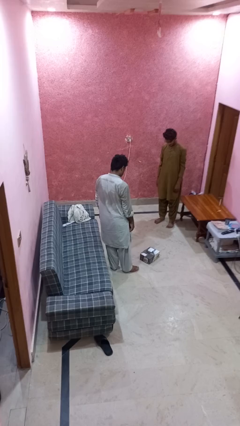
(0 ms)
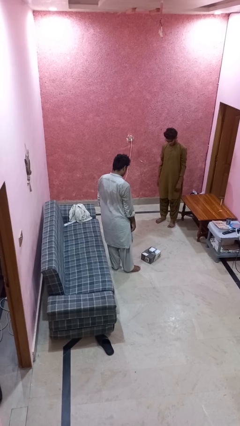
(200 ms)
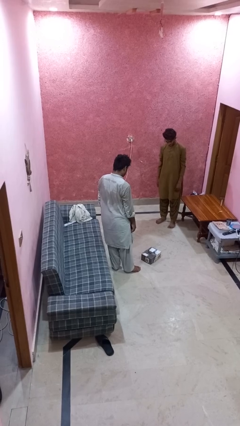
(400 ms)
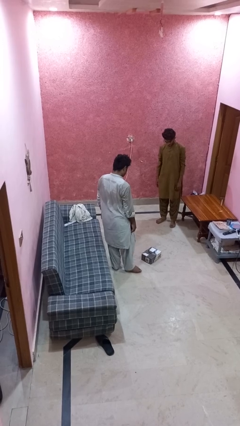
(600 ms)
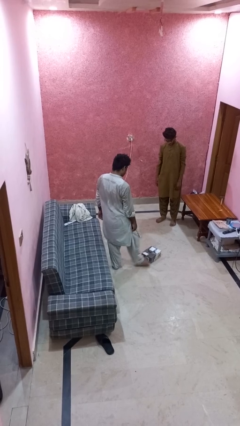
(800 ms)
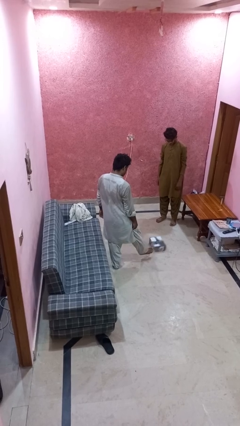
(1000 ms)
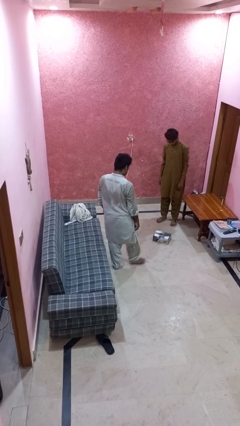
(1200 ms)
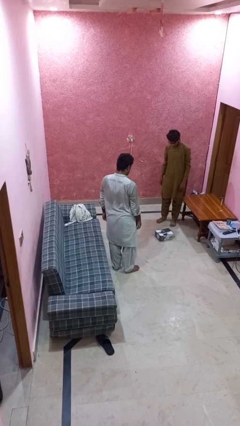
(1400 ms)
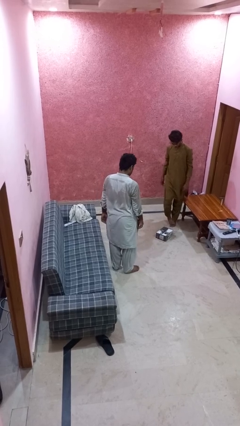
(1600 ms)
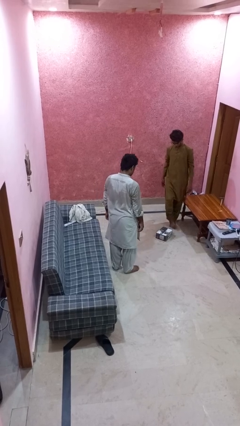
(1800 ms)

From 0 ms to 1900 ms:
person kicks object to person

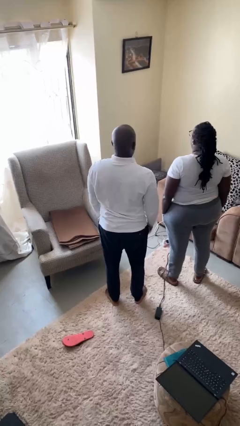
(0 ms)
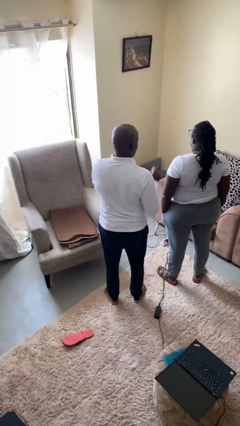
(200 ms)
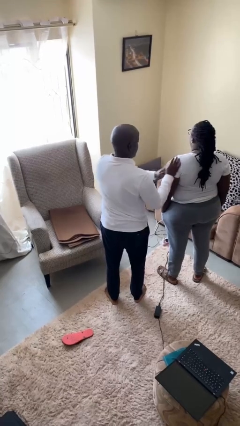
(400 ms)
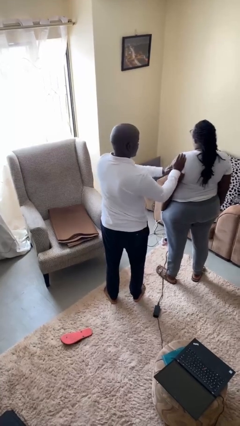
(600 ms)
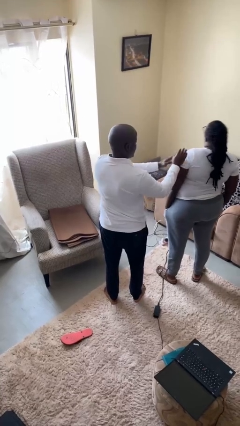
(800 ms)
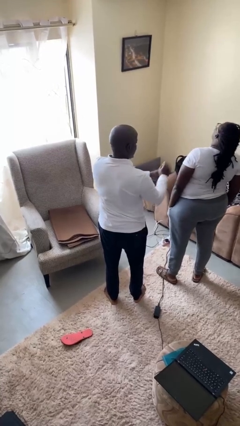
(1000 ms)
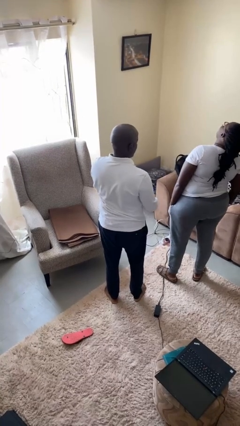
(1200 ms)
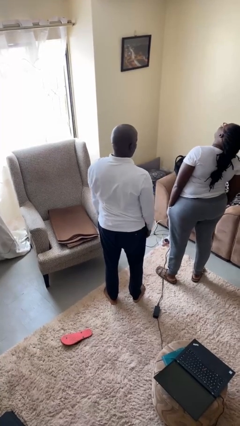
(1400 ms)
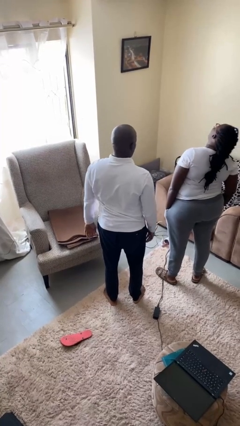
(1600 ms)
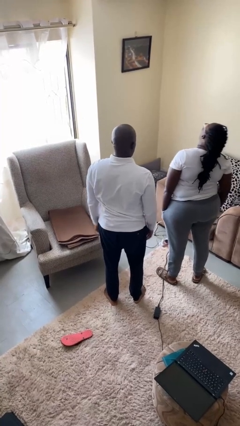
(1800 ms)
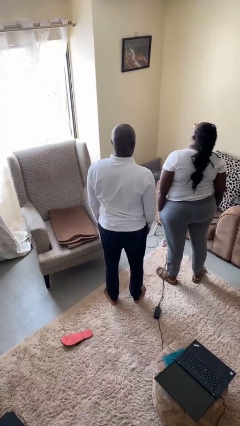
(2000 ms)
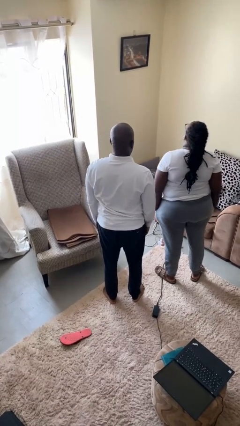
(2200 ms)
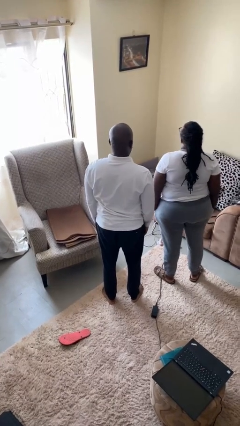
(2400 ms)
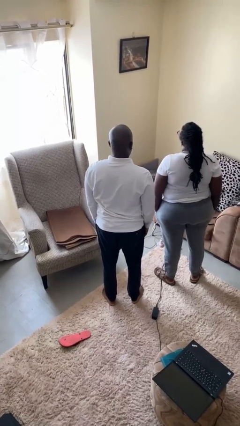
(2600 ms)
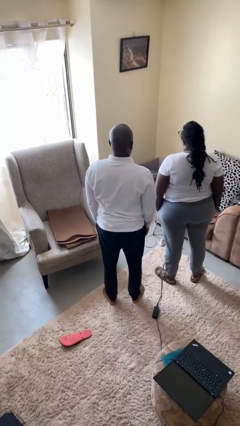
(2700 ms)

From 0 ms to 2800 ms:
person shoves person

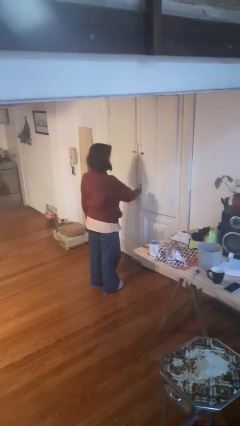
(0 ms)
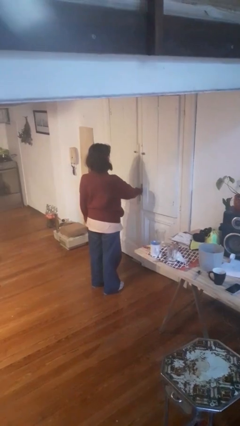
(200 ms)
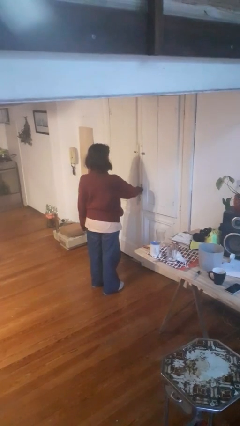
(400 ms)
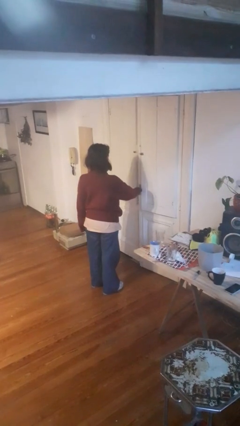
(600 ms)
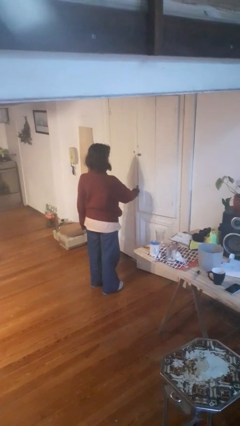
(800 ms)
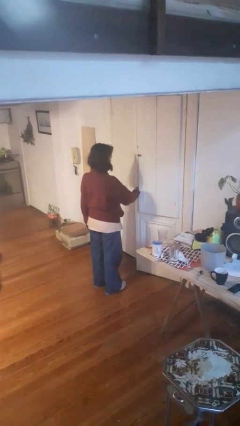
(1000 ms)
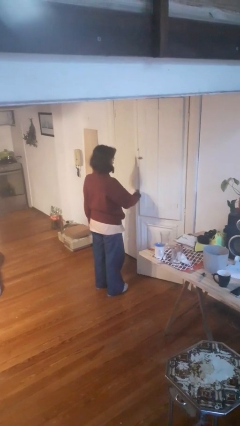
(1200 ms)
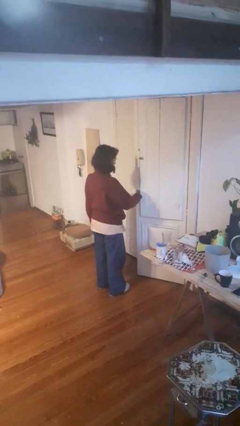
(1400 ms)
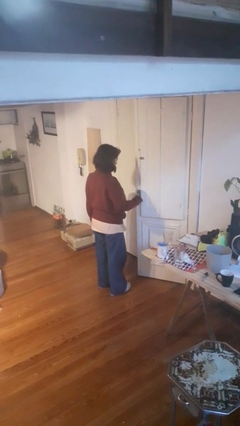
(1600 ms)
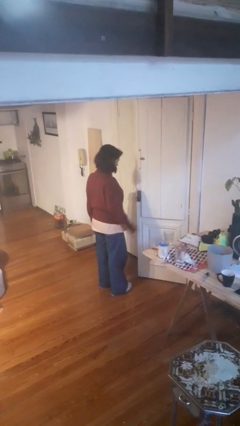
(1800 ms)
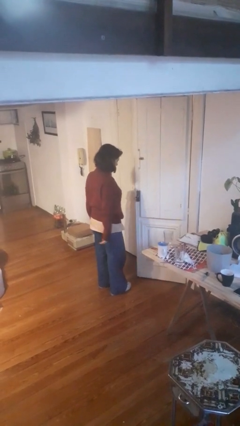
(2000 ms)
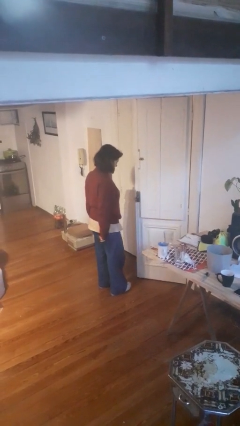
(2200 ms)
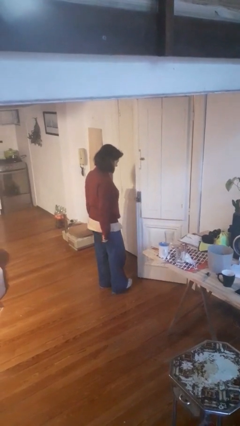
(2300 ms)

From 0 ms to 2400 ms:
person opens facility door

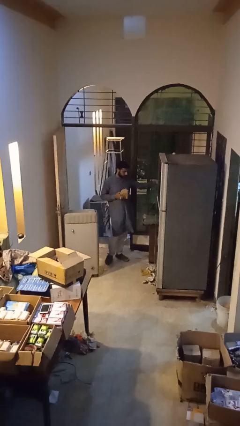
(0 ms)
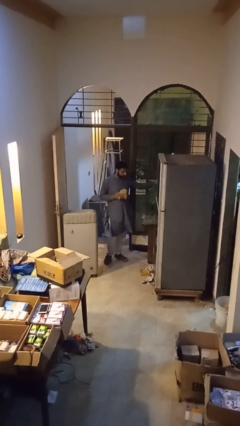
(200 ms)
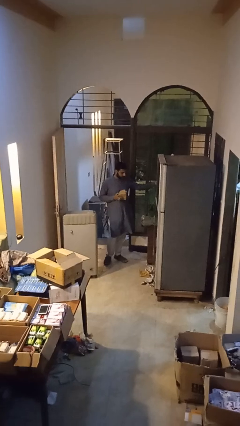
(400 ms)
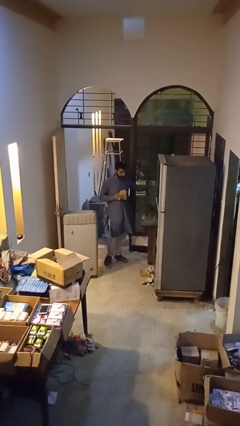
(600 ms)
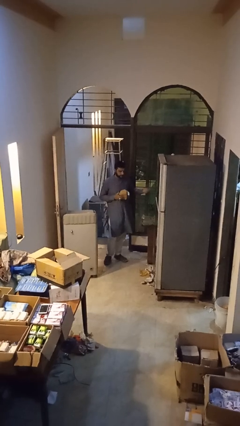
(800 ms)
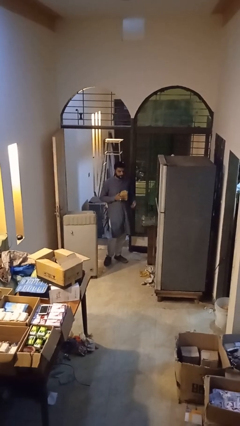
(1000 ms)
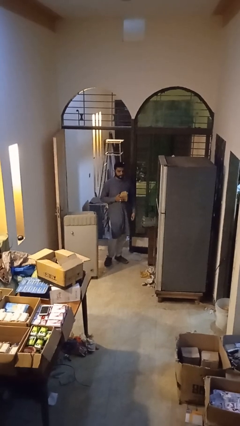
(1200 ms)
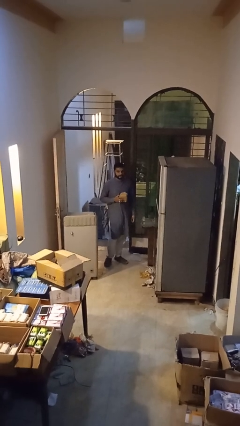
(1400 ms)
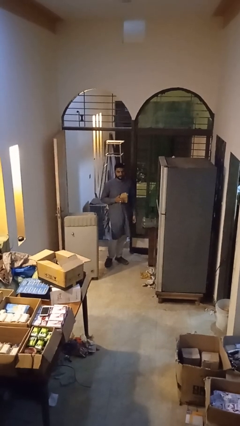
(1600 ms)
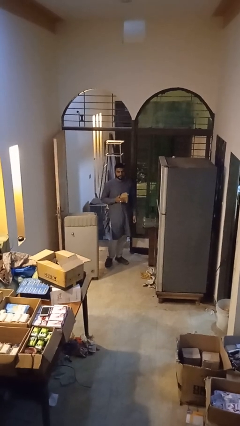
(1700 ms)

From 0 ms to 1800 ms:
person unplugs from electrical socket

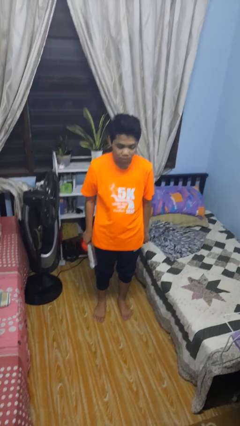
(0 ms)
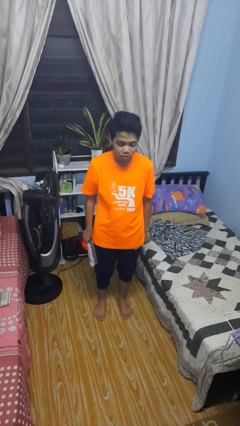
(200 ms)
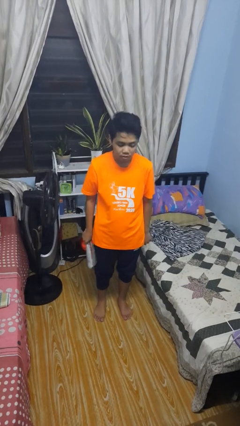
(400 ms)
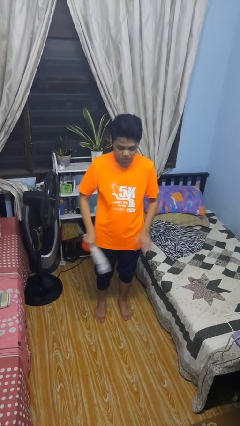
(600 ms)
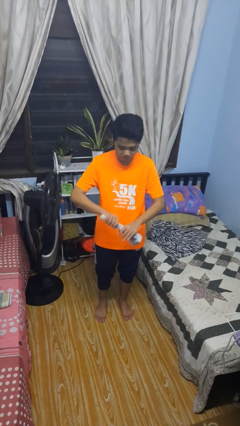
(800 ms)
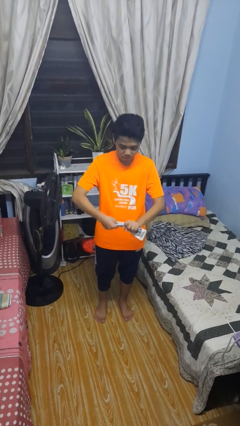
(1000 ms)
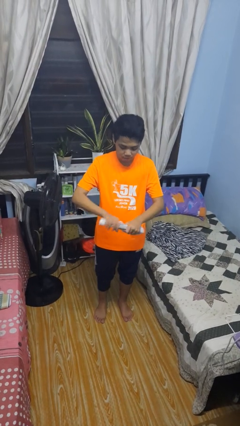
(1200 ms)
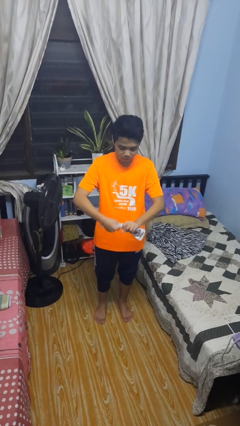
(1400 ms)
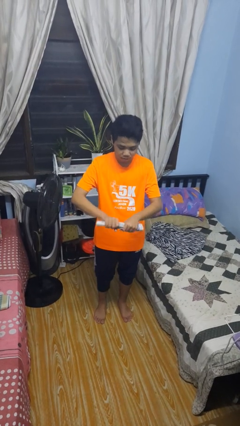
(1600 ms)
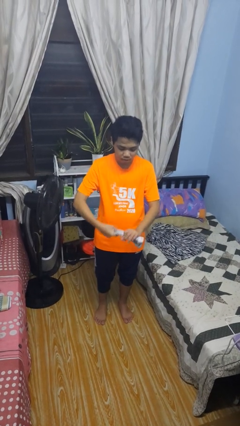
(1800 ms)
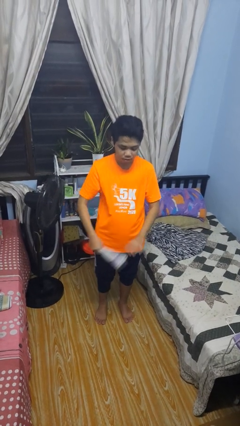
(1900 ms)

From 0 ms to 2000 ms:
person squeezes object

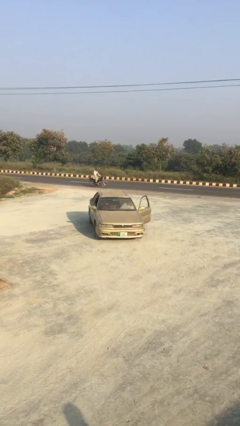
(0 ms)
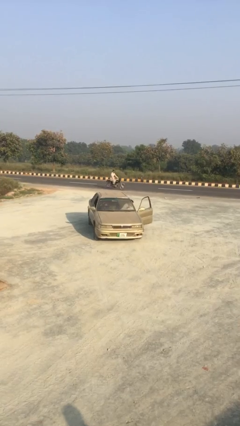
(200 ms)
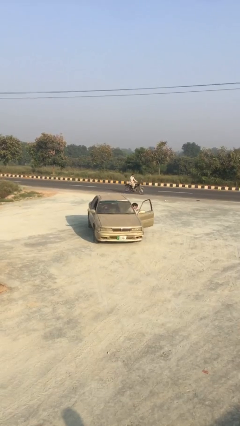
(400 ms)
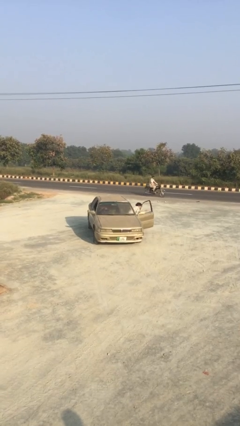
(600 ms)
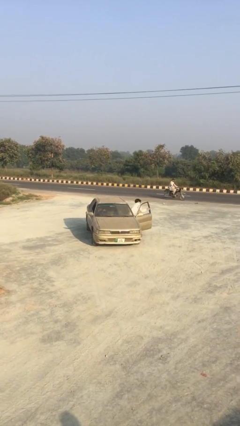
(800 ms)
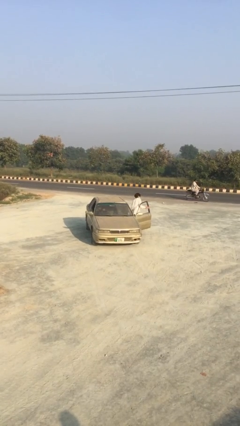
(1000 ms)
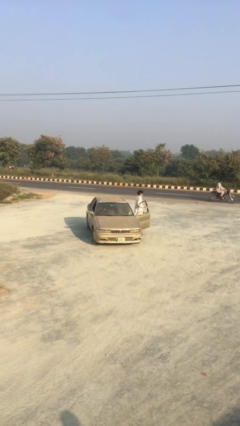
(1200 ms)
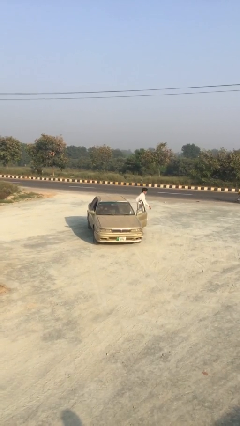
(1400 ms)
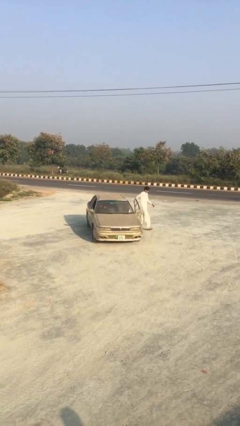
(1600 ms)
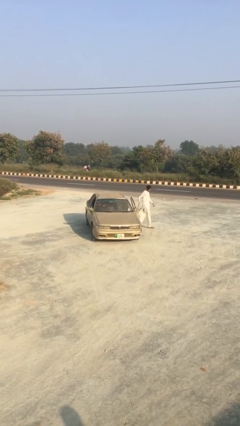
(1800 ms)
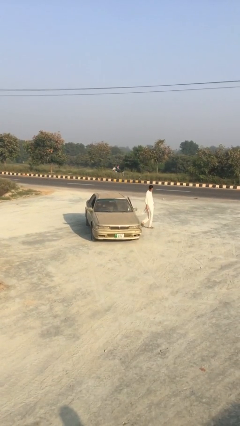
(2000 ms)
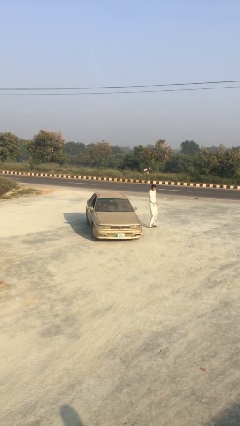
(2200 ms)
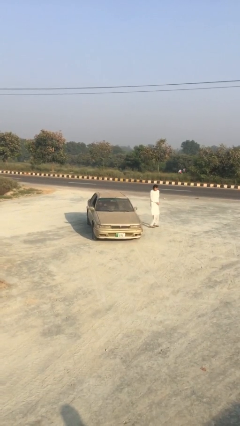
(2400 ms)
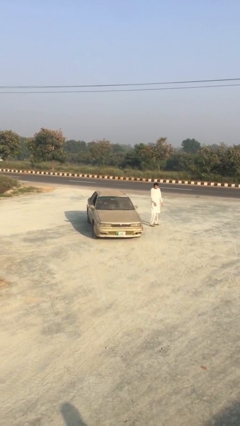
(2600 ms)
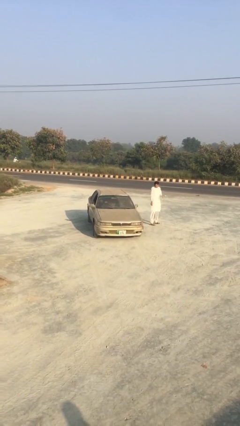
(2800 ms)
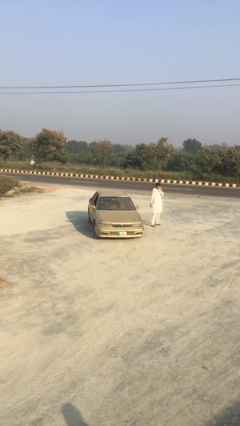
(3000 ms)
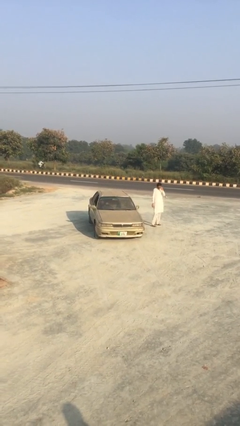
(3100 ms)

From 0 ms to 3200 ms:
car drops off person

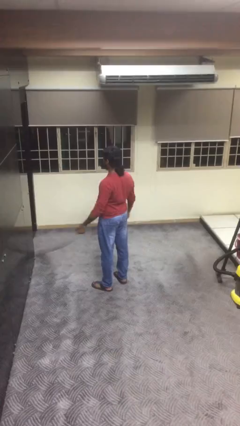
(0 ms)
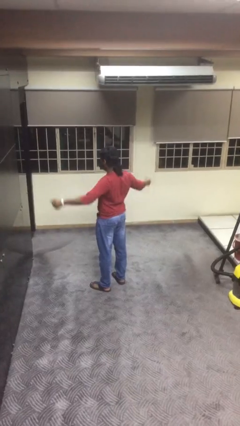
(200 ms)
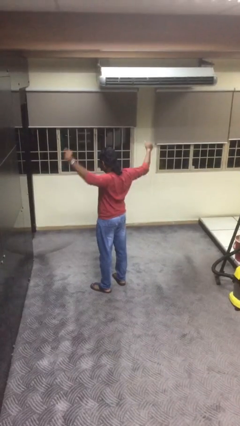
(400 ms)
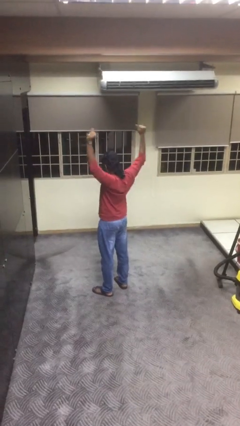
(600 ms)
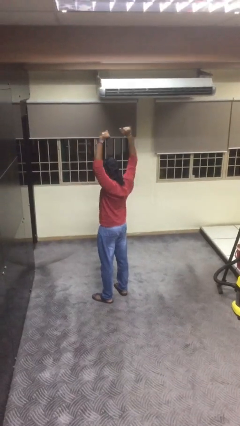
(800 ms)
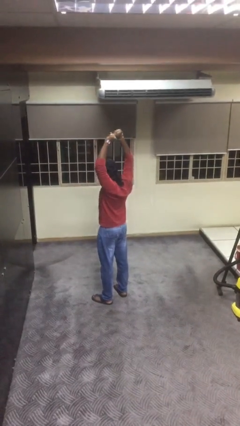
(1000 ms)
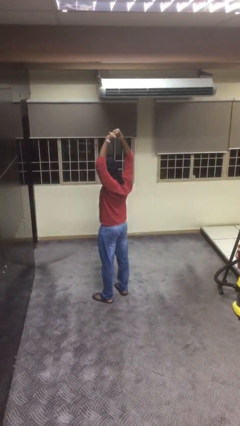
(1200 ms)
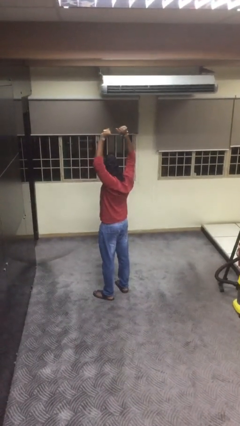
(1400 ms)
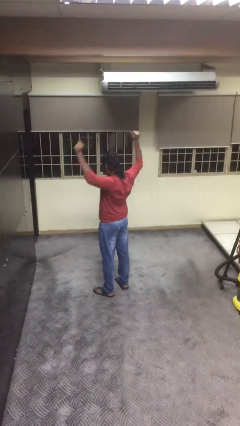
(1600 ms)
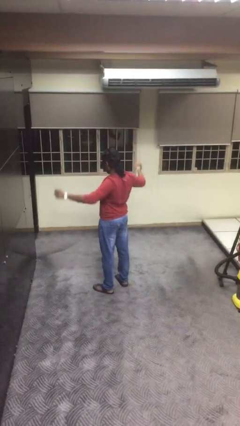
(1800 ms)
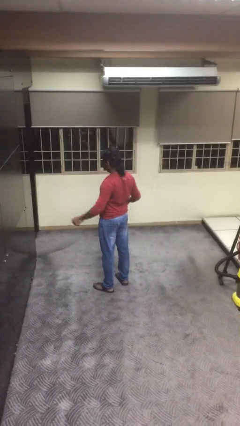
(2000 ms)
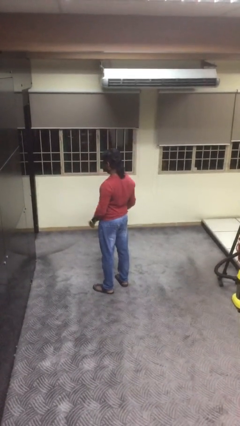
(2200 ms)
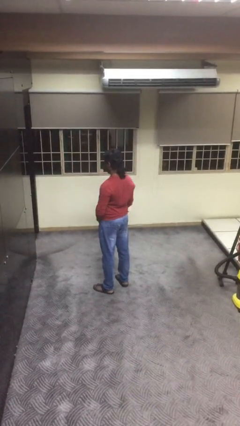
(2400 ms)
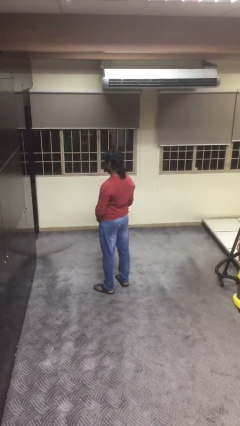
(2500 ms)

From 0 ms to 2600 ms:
person stretches arms over head

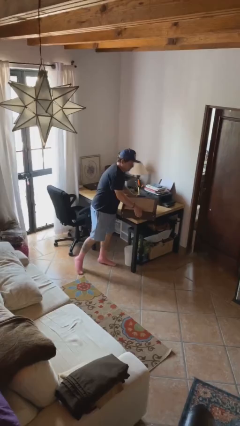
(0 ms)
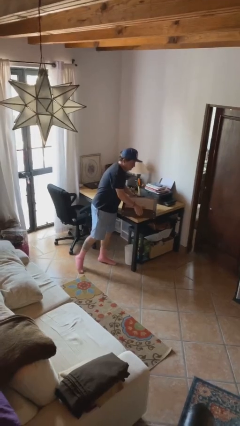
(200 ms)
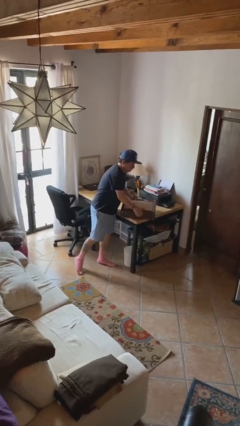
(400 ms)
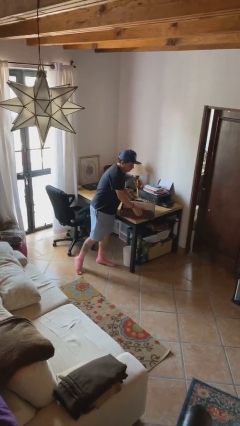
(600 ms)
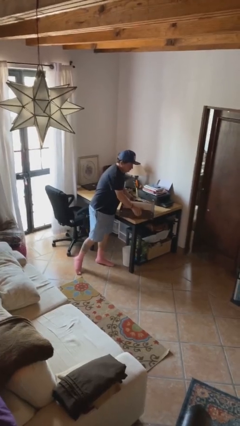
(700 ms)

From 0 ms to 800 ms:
person puts down object on table
